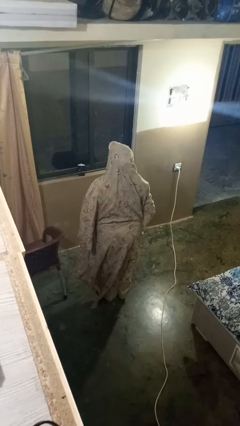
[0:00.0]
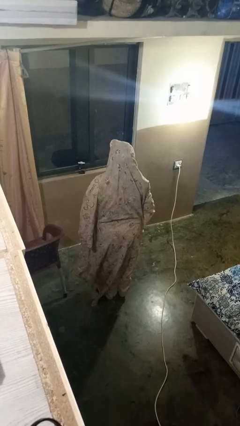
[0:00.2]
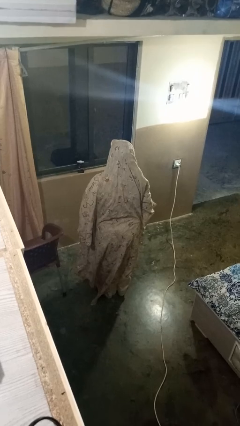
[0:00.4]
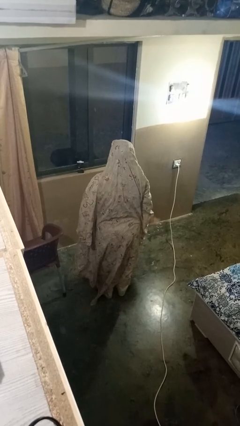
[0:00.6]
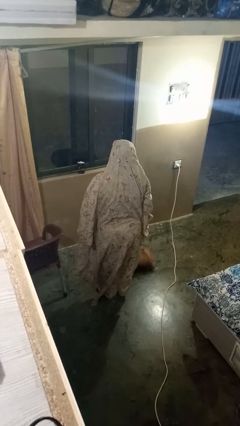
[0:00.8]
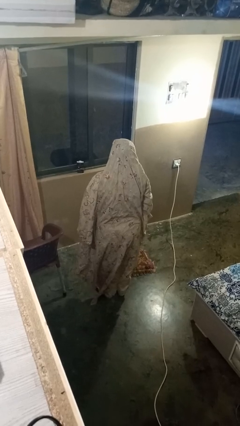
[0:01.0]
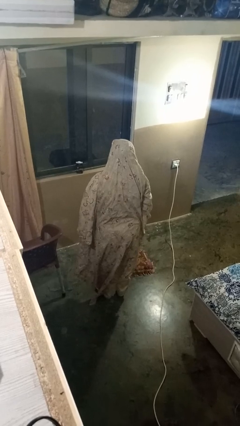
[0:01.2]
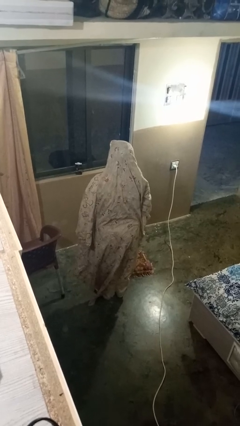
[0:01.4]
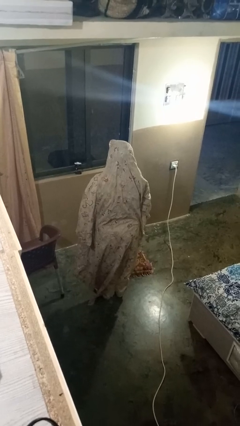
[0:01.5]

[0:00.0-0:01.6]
person drops object

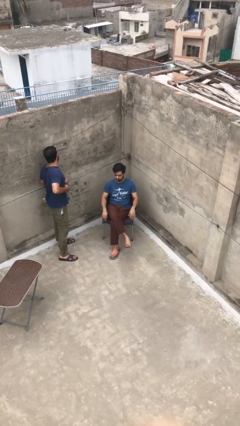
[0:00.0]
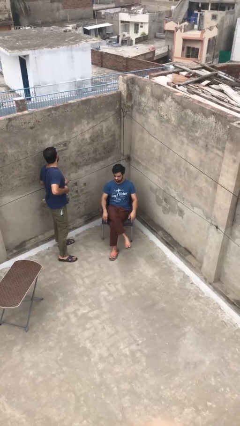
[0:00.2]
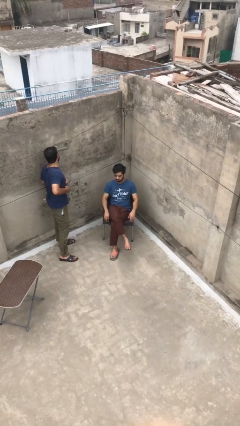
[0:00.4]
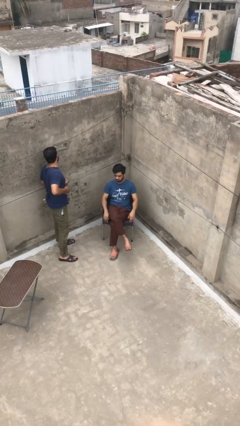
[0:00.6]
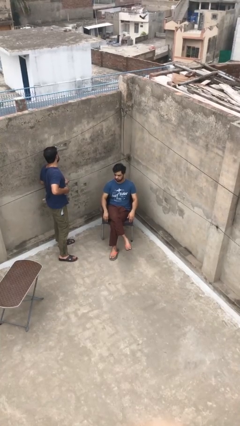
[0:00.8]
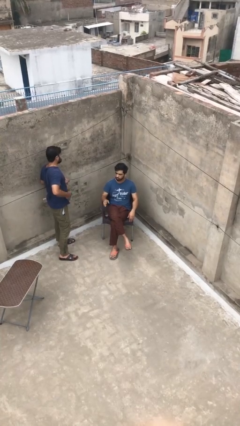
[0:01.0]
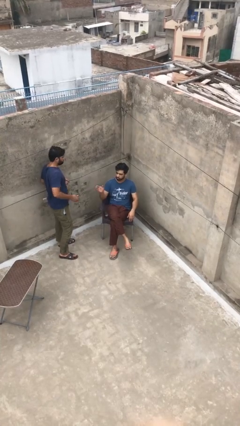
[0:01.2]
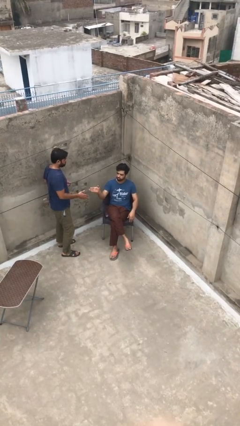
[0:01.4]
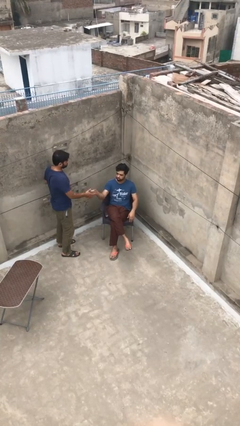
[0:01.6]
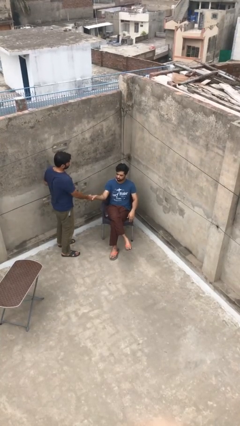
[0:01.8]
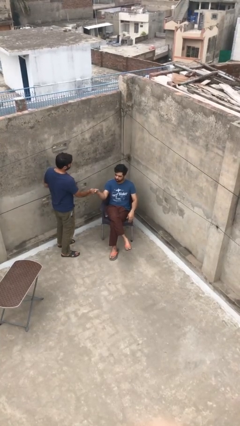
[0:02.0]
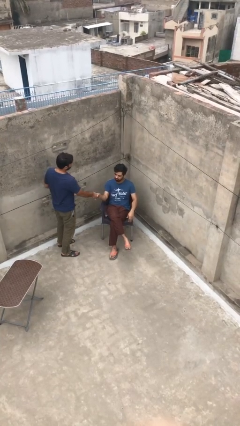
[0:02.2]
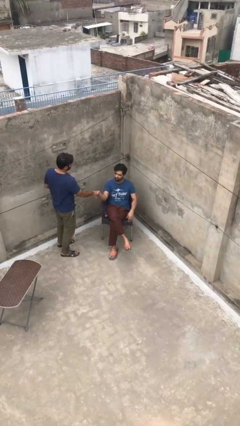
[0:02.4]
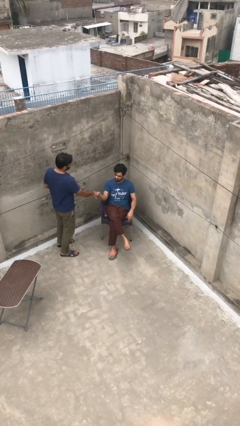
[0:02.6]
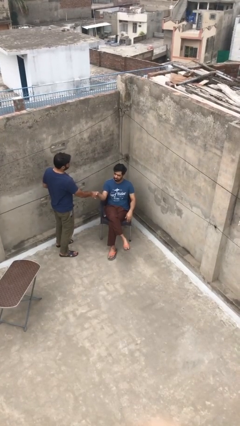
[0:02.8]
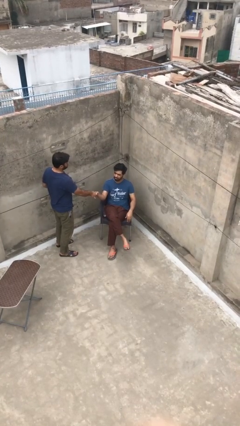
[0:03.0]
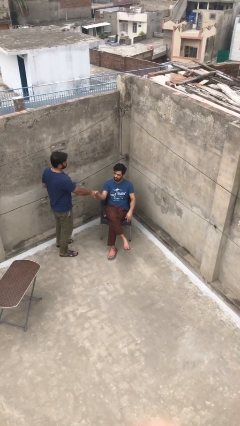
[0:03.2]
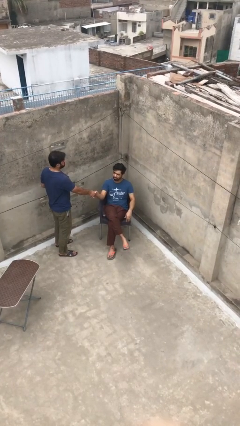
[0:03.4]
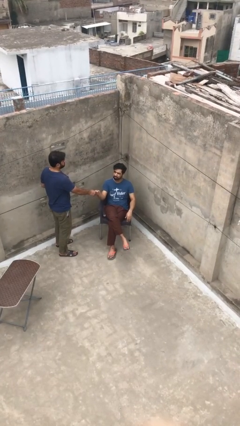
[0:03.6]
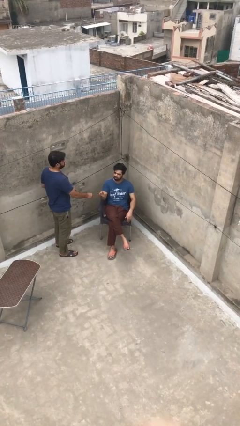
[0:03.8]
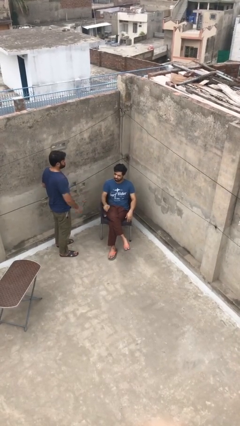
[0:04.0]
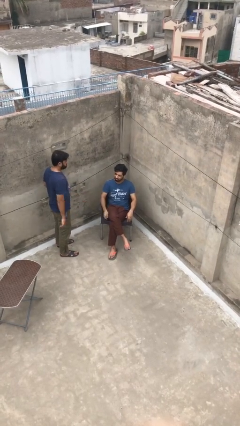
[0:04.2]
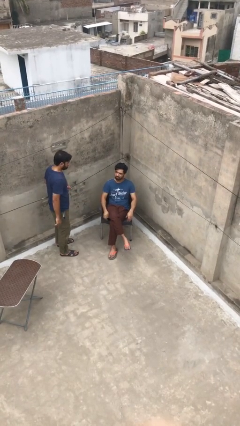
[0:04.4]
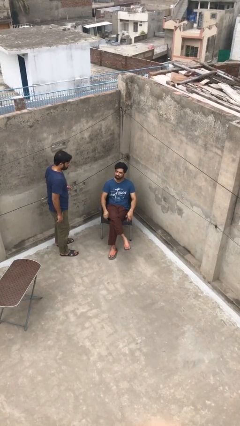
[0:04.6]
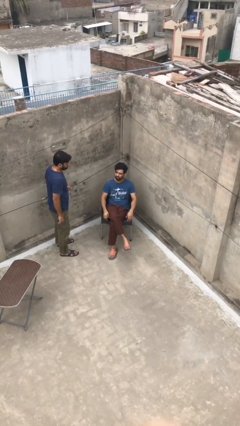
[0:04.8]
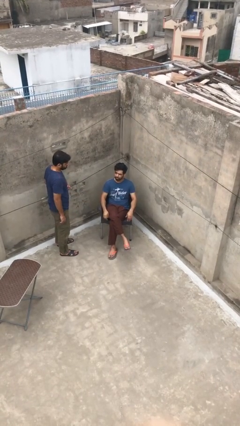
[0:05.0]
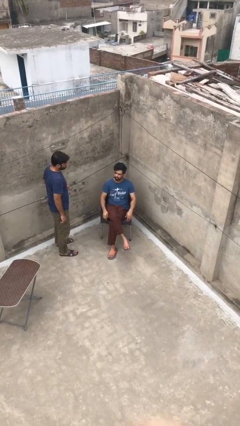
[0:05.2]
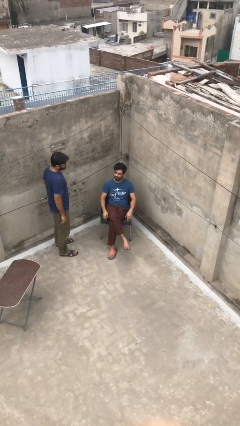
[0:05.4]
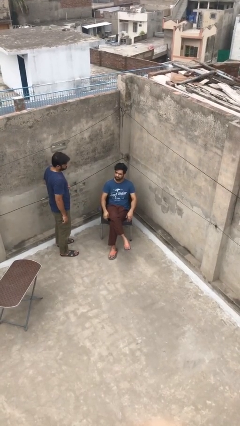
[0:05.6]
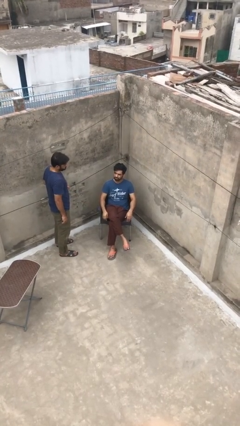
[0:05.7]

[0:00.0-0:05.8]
person shakes hand

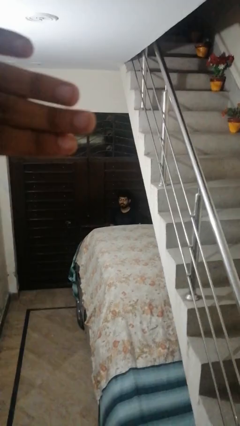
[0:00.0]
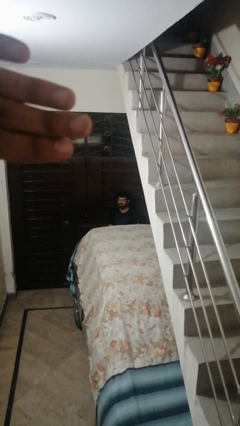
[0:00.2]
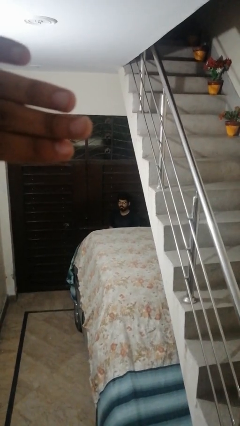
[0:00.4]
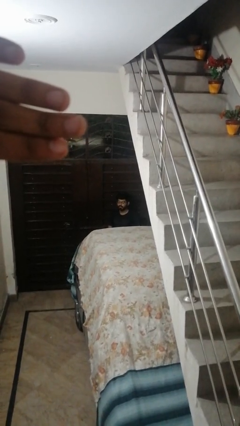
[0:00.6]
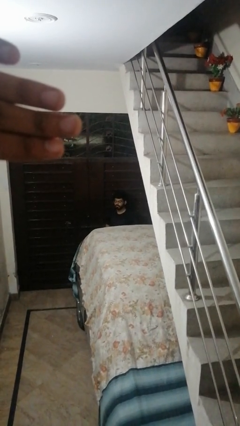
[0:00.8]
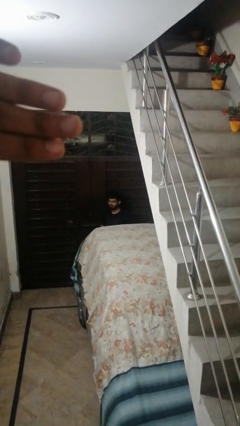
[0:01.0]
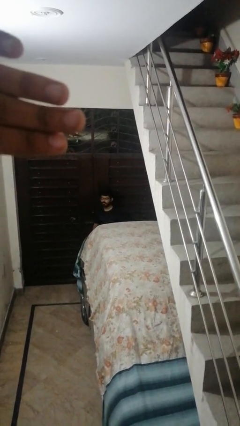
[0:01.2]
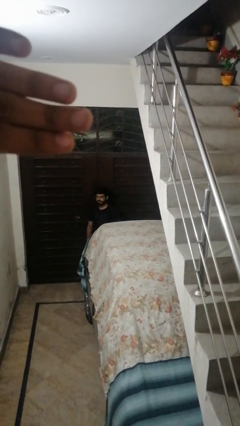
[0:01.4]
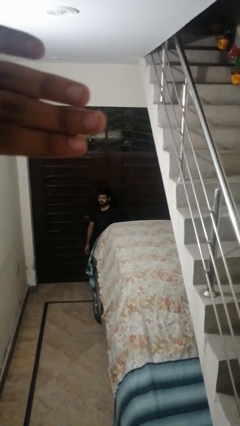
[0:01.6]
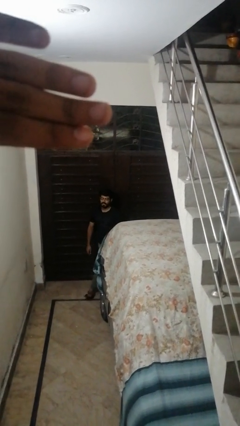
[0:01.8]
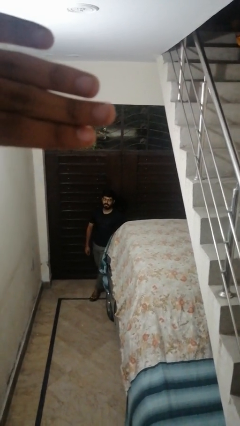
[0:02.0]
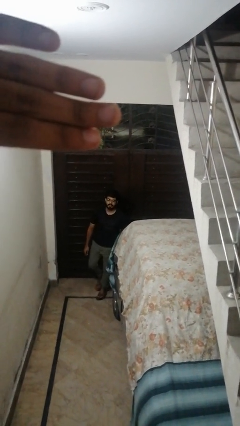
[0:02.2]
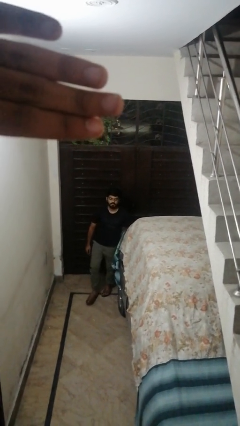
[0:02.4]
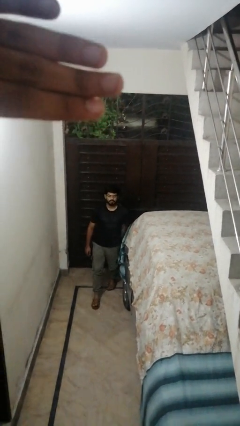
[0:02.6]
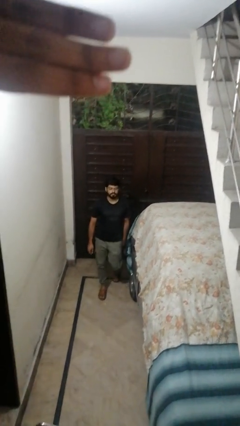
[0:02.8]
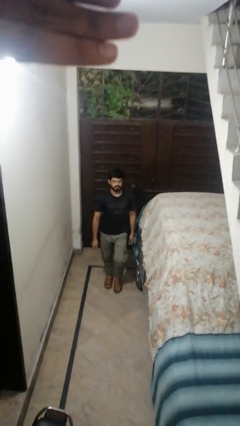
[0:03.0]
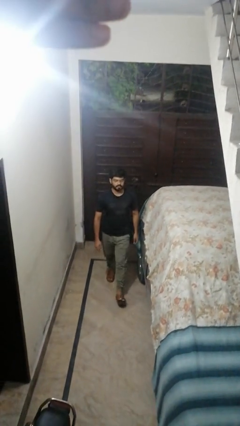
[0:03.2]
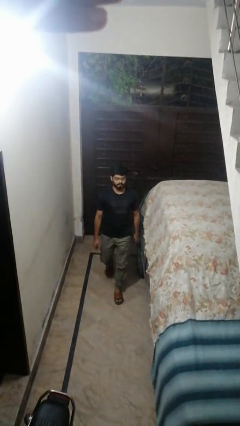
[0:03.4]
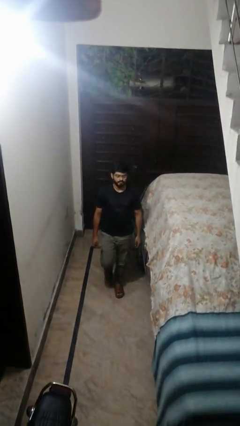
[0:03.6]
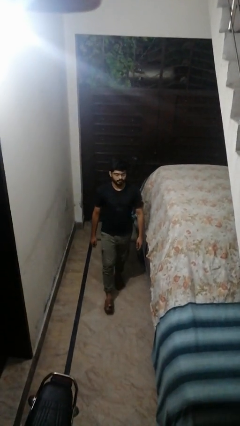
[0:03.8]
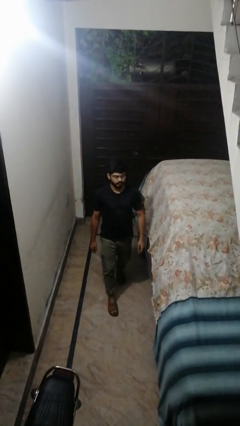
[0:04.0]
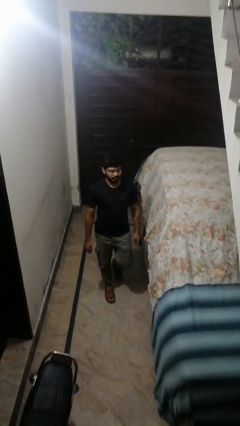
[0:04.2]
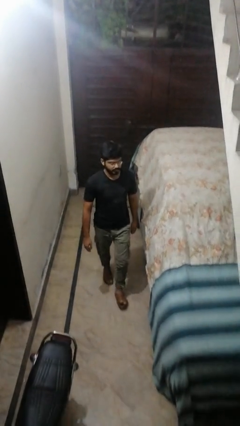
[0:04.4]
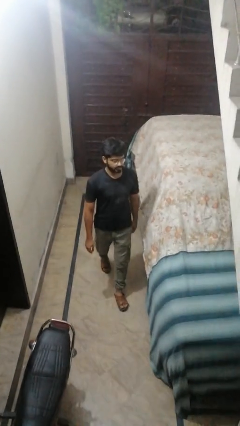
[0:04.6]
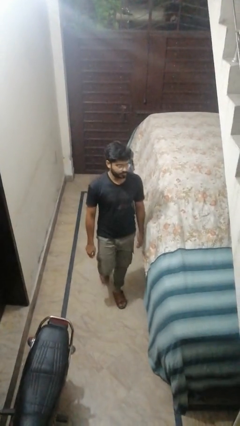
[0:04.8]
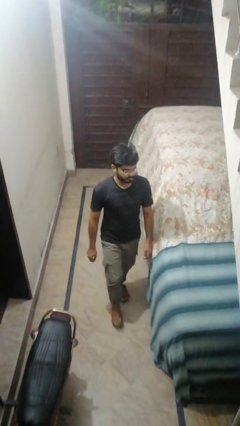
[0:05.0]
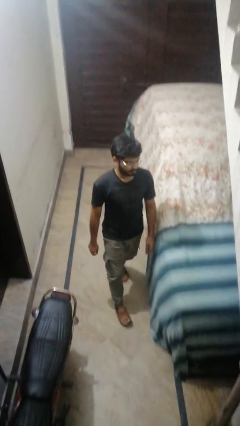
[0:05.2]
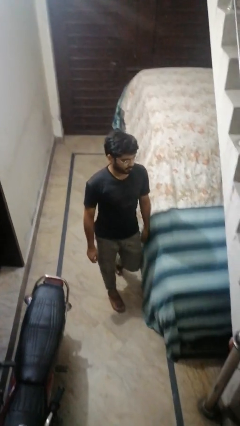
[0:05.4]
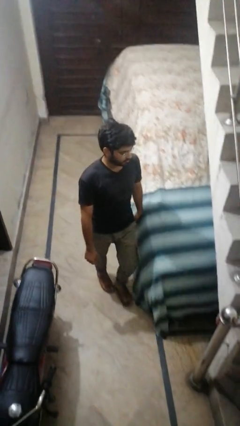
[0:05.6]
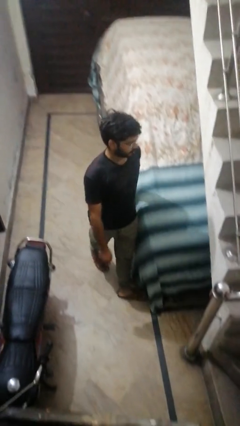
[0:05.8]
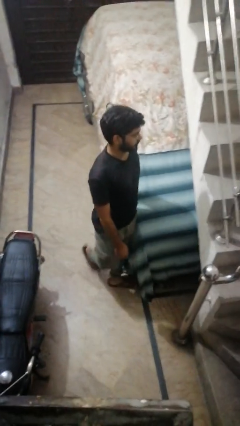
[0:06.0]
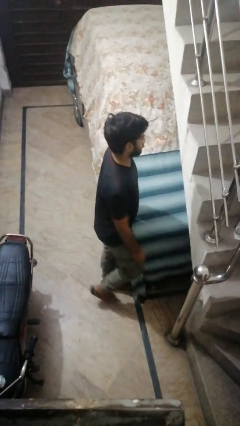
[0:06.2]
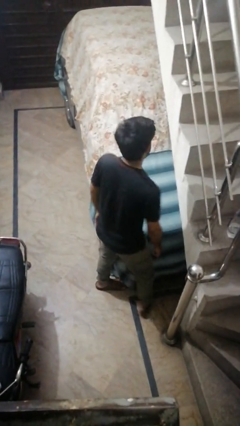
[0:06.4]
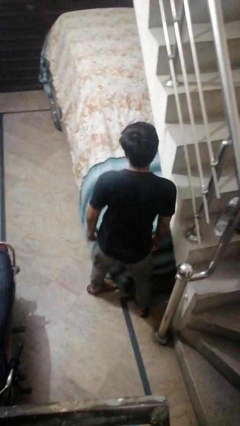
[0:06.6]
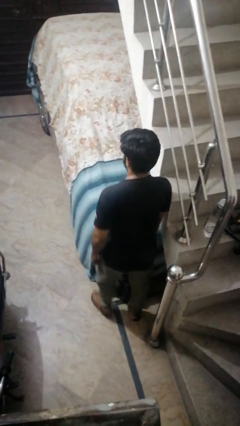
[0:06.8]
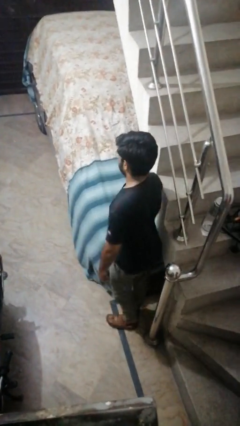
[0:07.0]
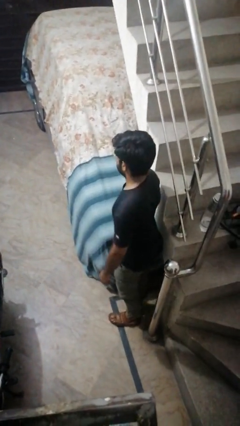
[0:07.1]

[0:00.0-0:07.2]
person walks around car

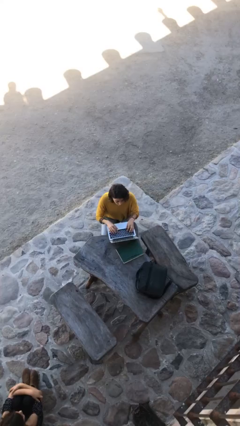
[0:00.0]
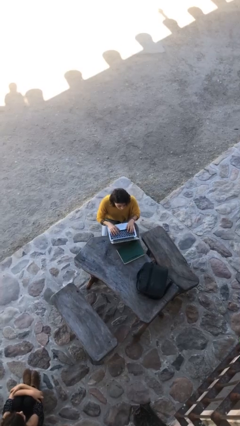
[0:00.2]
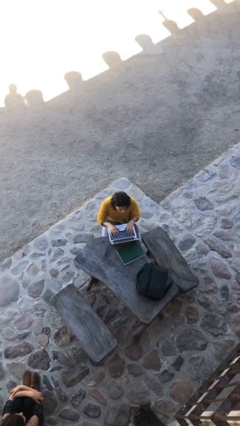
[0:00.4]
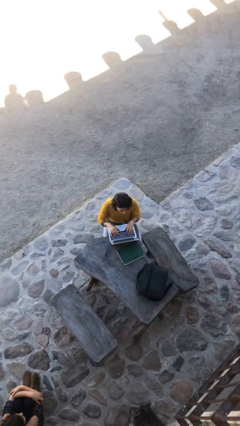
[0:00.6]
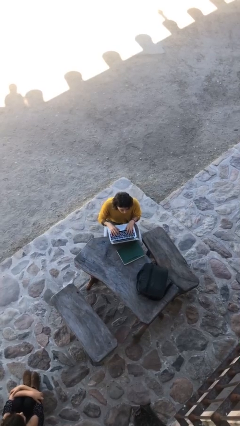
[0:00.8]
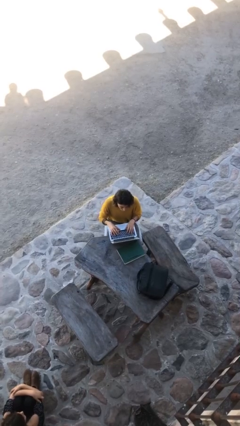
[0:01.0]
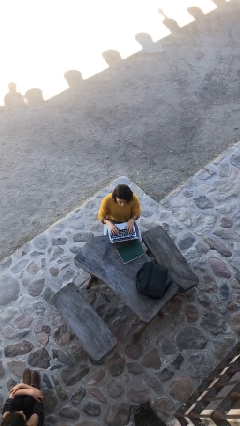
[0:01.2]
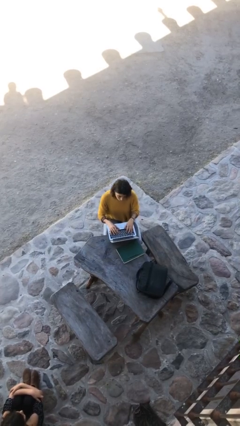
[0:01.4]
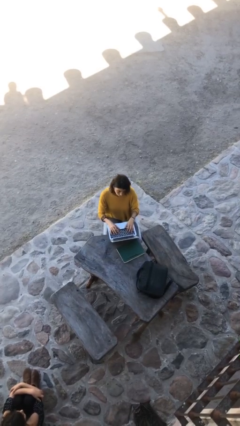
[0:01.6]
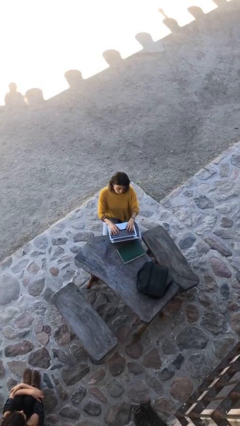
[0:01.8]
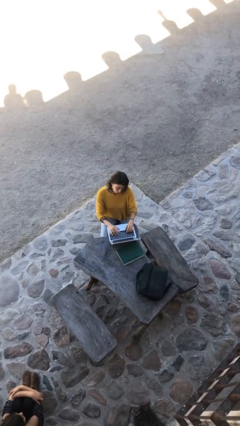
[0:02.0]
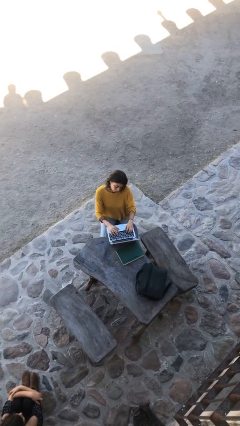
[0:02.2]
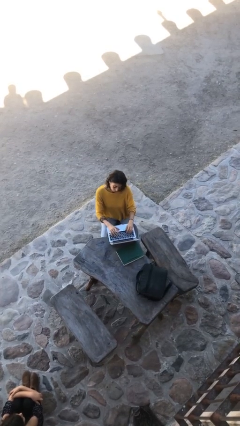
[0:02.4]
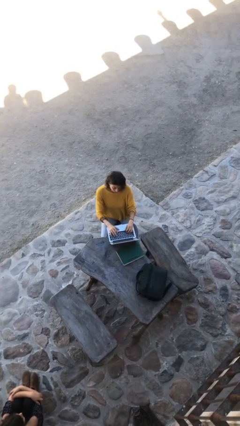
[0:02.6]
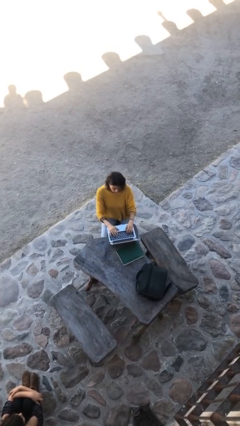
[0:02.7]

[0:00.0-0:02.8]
person interacts with laptop

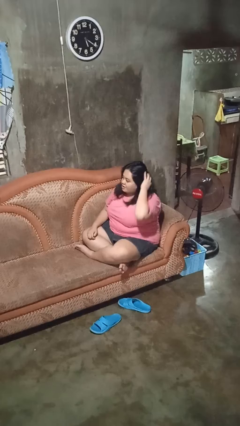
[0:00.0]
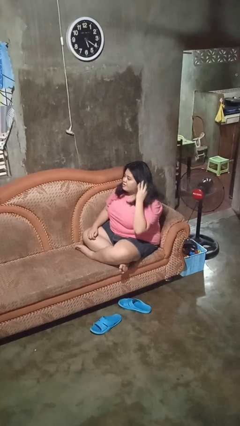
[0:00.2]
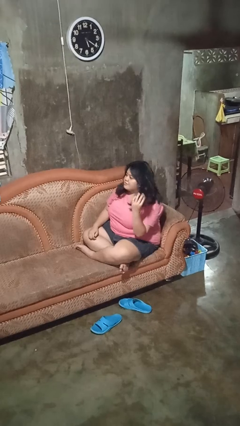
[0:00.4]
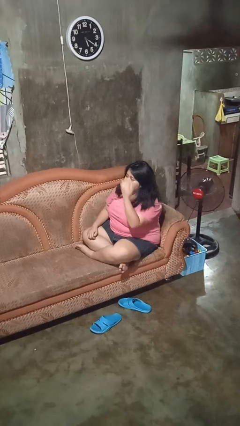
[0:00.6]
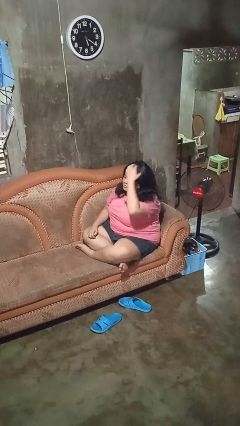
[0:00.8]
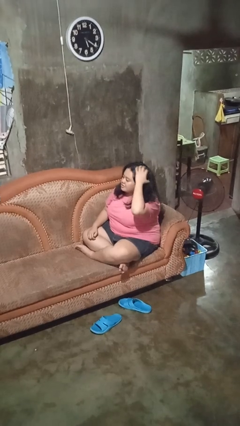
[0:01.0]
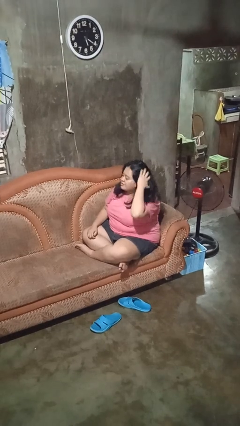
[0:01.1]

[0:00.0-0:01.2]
person strokes hair
